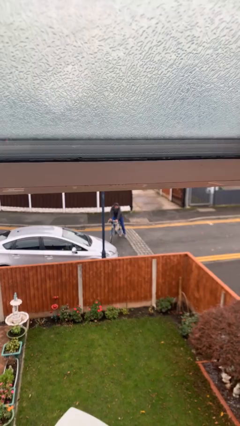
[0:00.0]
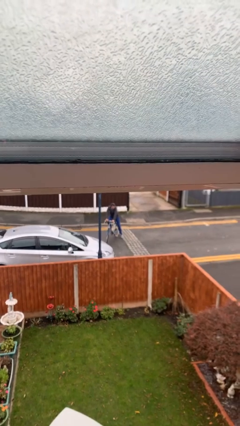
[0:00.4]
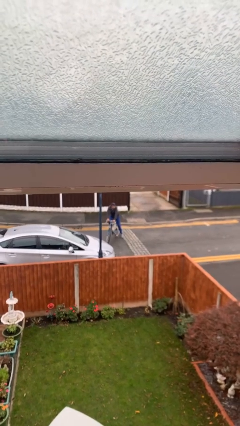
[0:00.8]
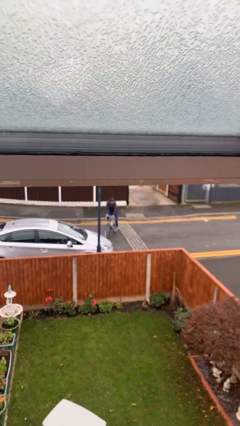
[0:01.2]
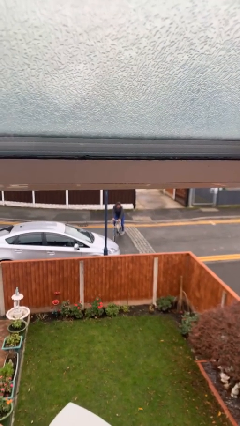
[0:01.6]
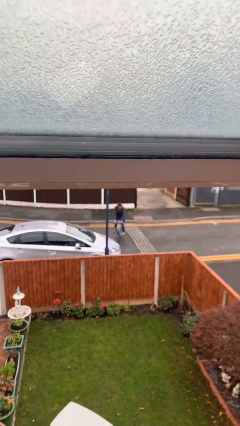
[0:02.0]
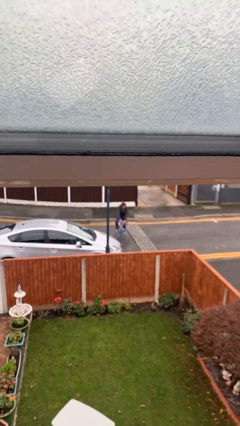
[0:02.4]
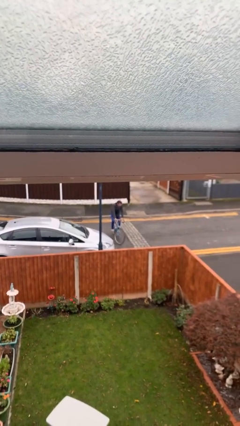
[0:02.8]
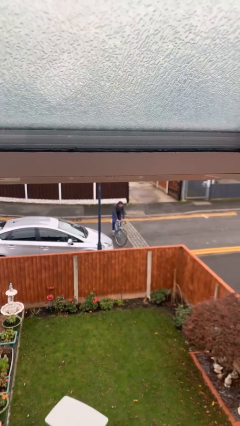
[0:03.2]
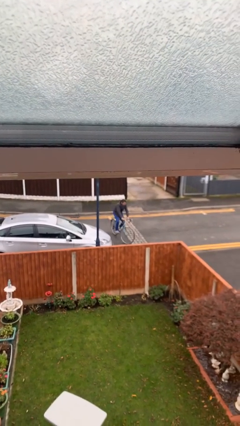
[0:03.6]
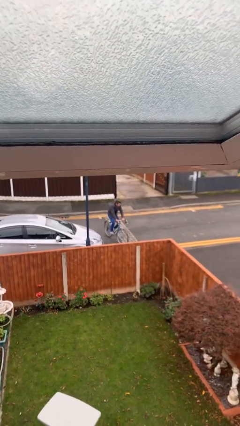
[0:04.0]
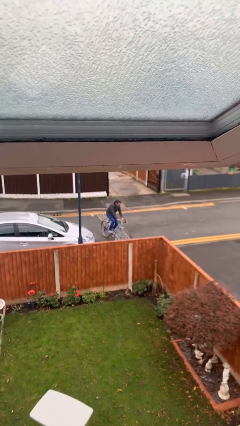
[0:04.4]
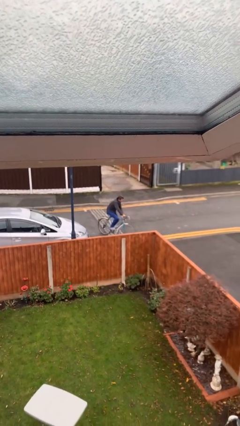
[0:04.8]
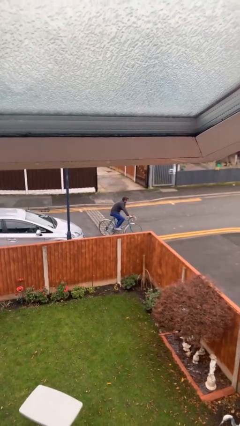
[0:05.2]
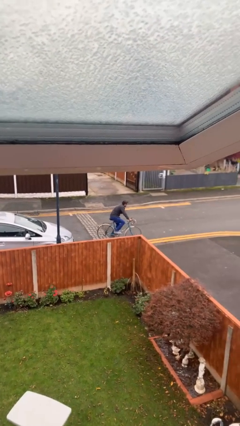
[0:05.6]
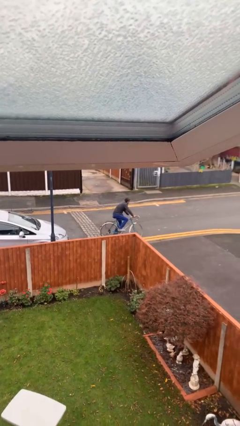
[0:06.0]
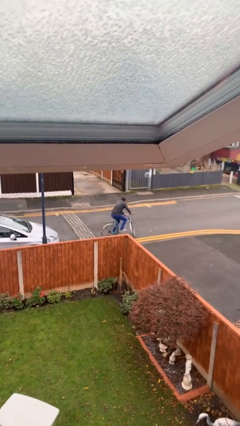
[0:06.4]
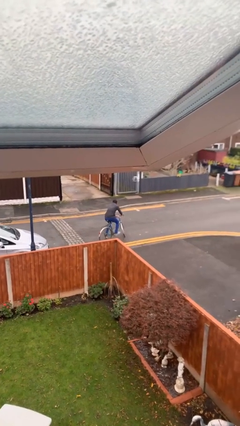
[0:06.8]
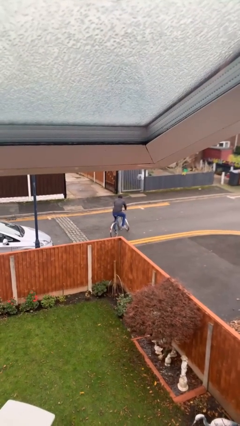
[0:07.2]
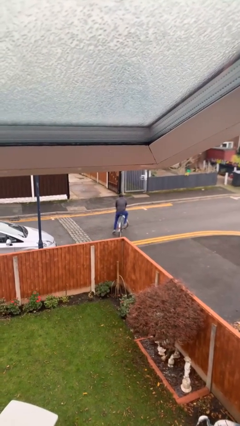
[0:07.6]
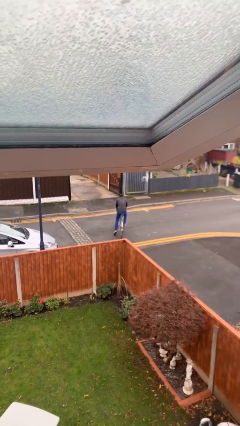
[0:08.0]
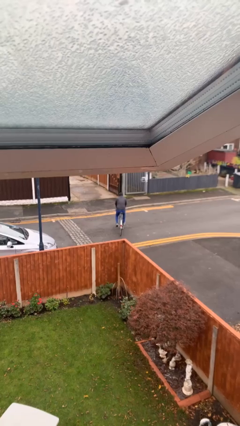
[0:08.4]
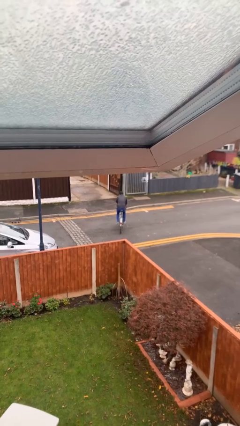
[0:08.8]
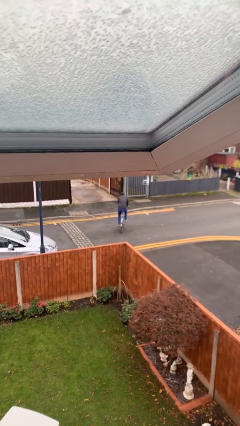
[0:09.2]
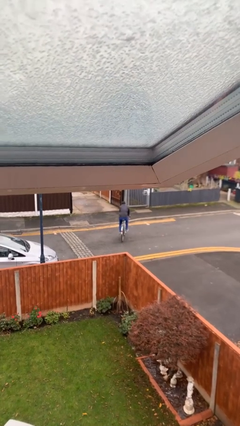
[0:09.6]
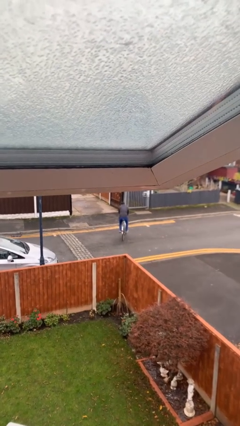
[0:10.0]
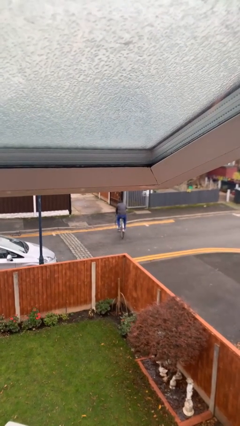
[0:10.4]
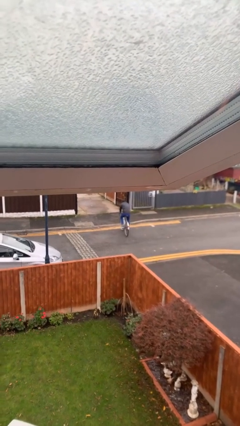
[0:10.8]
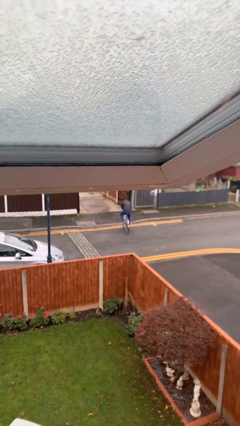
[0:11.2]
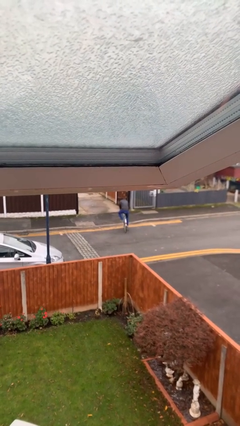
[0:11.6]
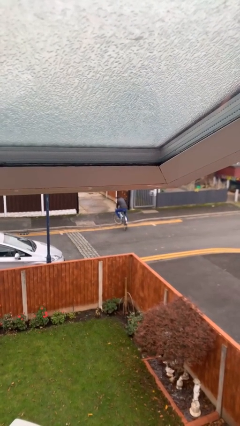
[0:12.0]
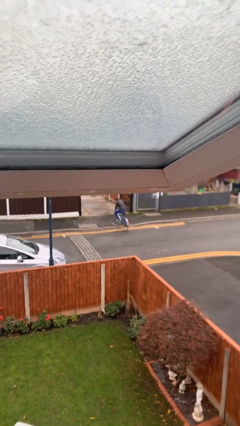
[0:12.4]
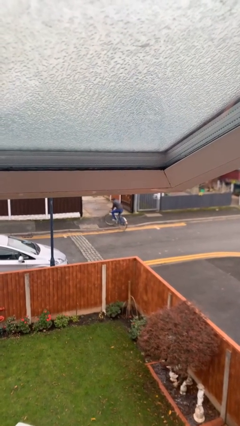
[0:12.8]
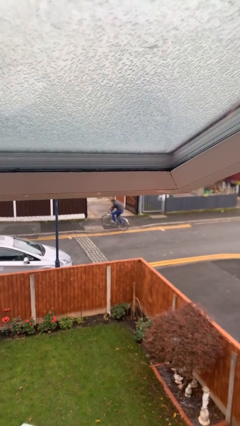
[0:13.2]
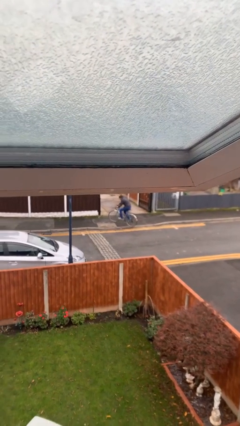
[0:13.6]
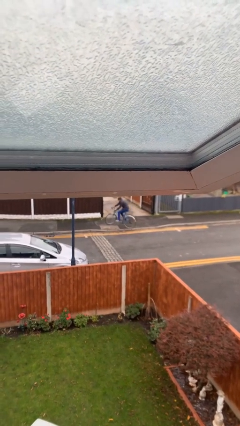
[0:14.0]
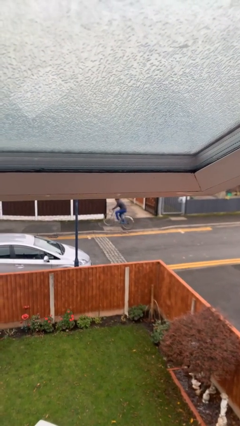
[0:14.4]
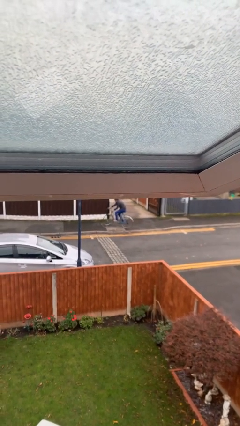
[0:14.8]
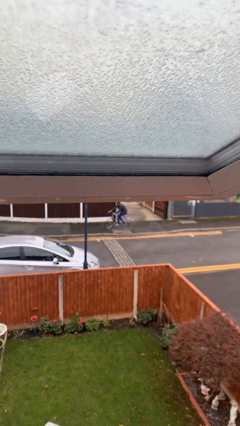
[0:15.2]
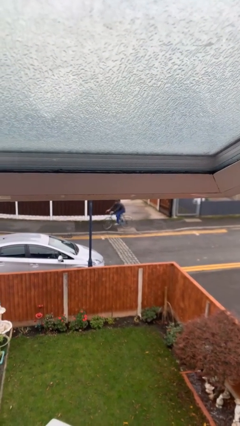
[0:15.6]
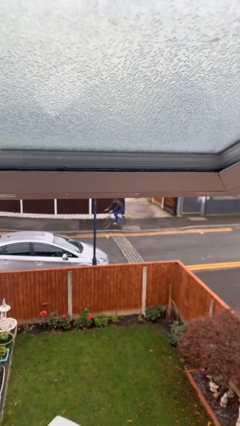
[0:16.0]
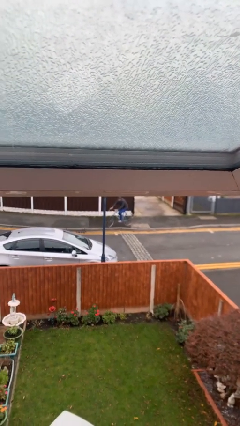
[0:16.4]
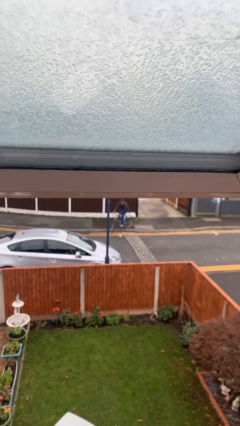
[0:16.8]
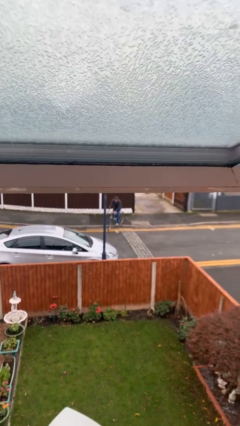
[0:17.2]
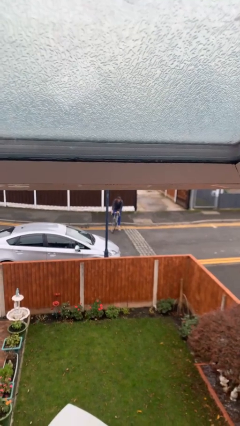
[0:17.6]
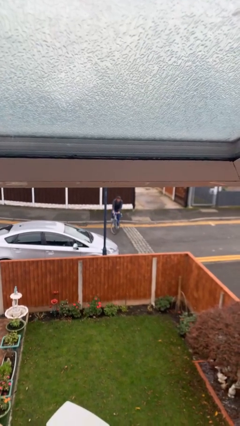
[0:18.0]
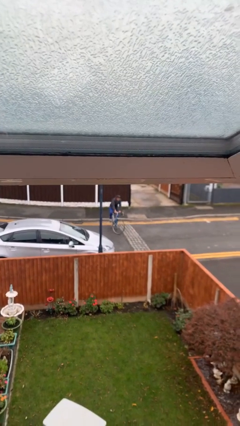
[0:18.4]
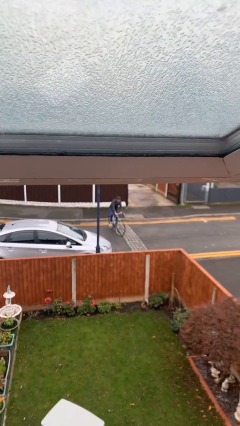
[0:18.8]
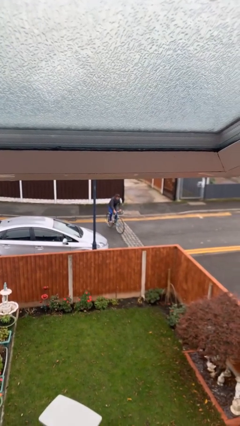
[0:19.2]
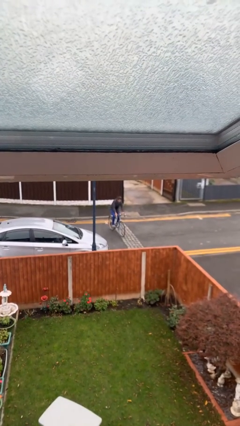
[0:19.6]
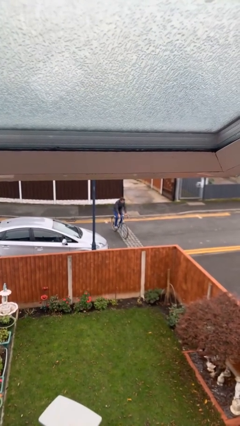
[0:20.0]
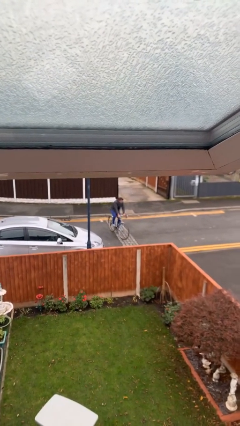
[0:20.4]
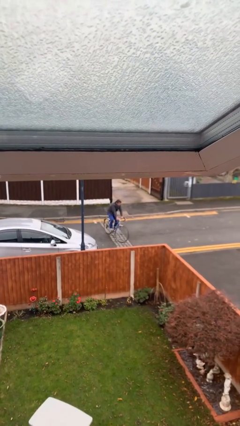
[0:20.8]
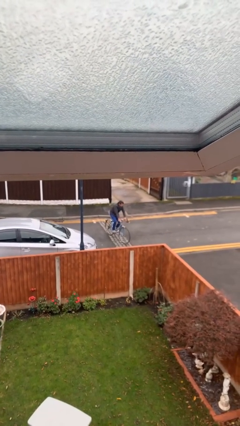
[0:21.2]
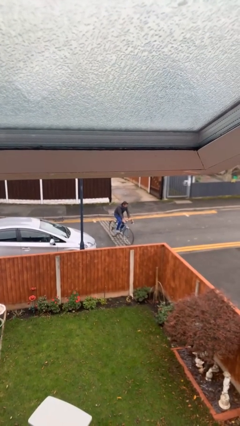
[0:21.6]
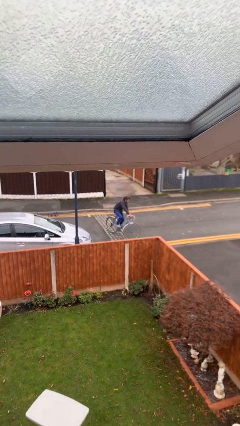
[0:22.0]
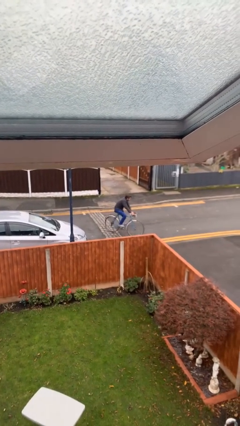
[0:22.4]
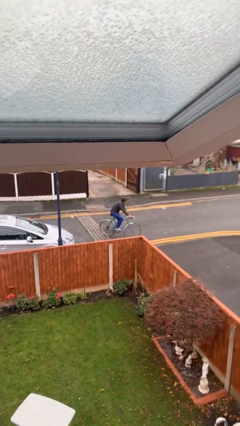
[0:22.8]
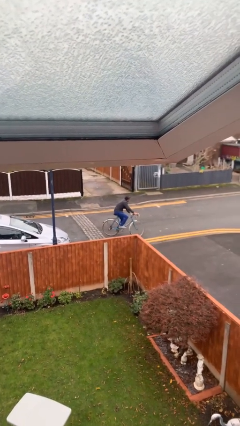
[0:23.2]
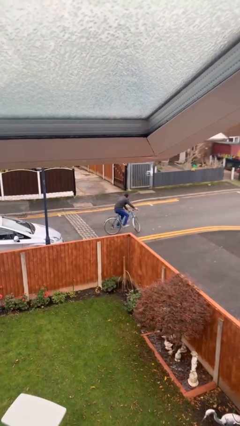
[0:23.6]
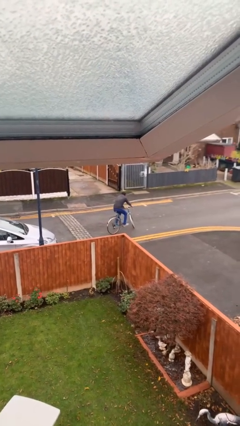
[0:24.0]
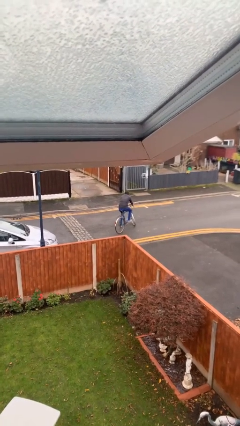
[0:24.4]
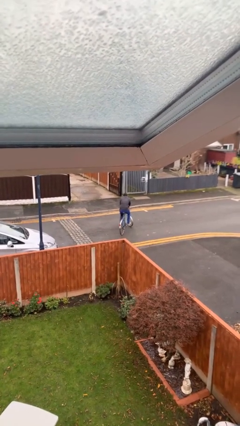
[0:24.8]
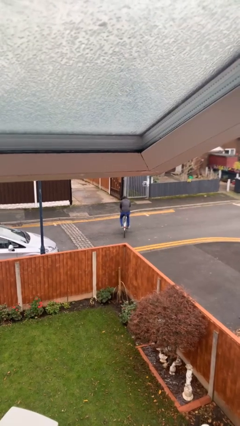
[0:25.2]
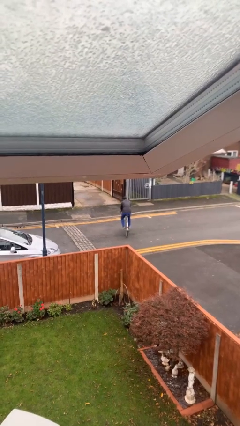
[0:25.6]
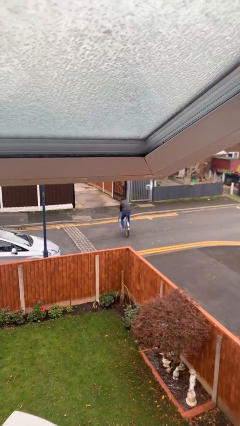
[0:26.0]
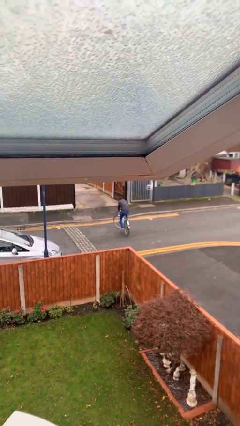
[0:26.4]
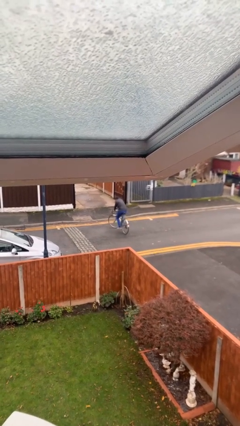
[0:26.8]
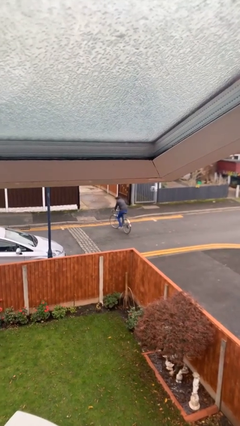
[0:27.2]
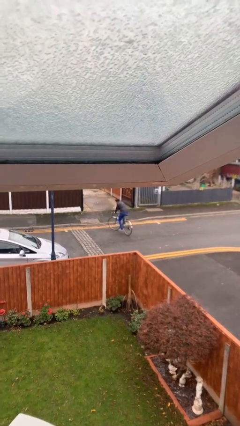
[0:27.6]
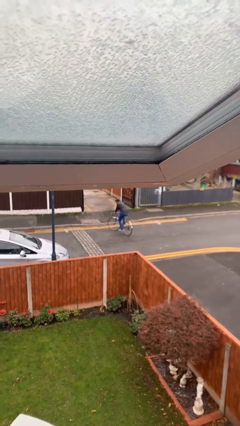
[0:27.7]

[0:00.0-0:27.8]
person rides bicycle

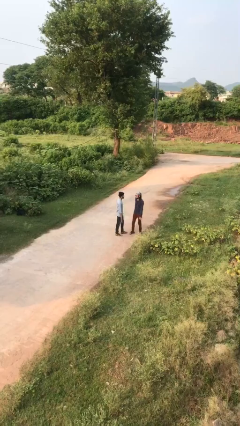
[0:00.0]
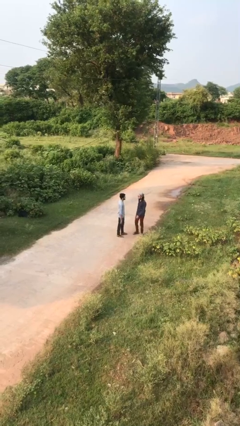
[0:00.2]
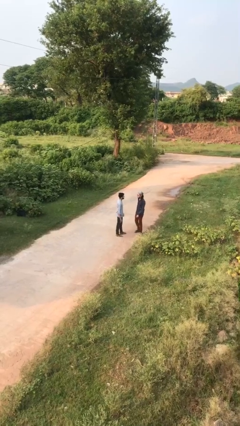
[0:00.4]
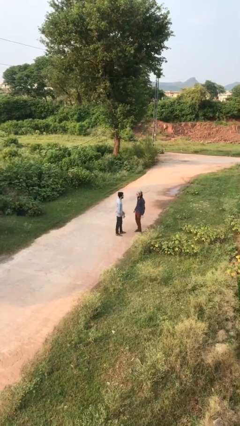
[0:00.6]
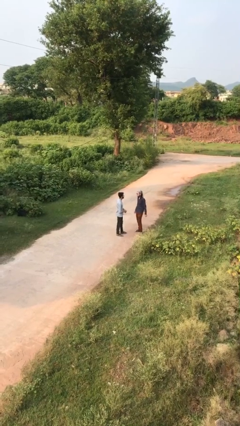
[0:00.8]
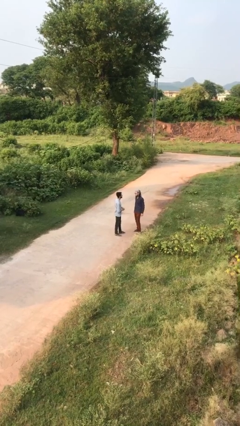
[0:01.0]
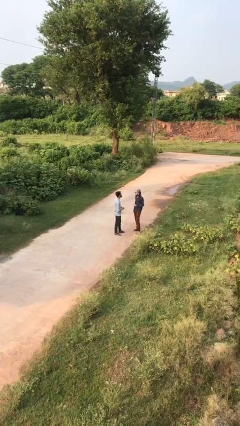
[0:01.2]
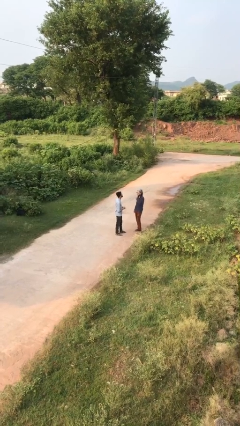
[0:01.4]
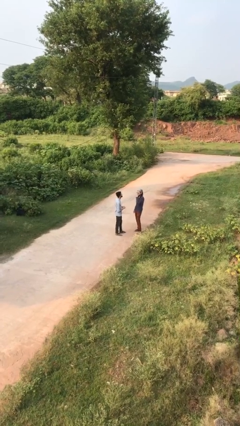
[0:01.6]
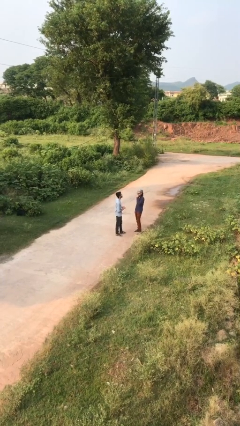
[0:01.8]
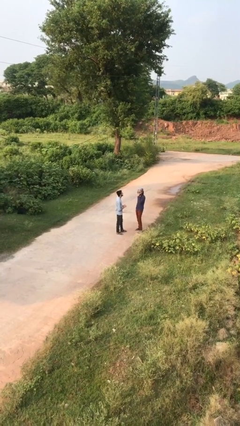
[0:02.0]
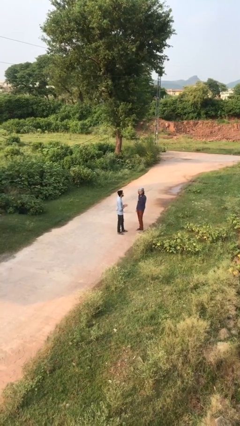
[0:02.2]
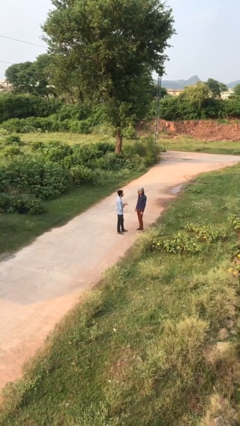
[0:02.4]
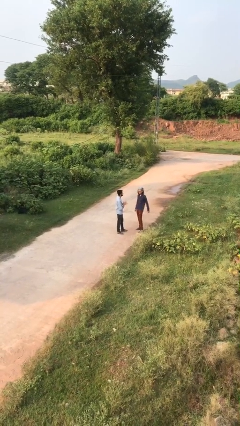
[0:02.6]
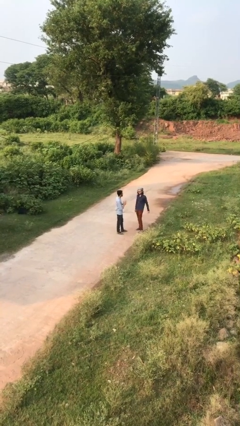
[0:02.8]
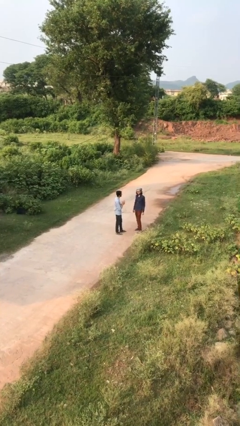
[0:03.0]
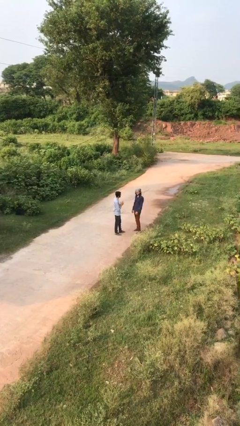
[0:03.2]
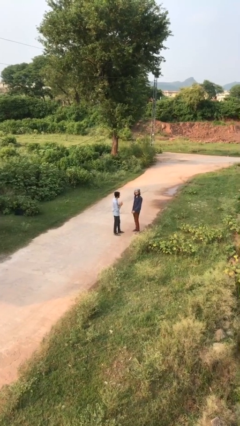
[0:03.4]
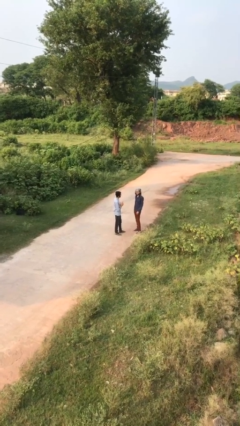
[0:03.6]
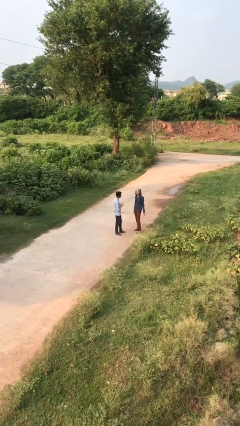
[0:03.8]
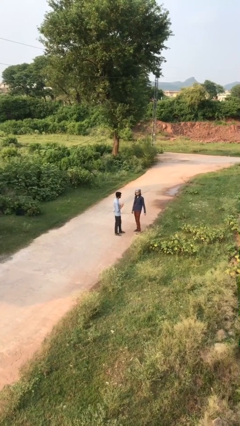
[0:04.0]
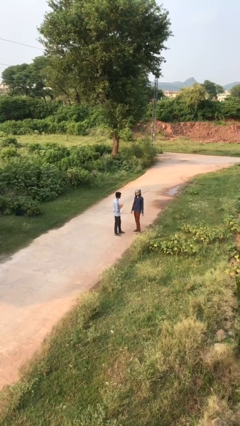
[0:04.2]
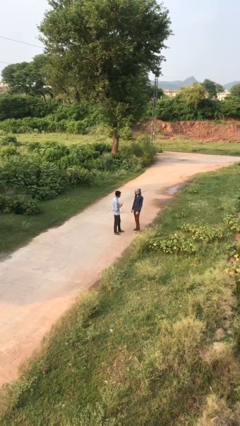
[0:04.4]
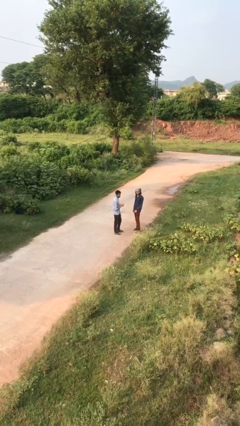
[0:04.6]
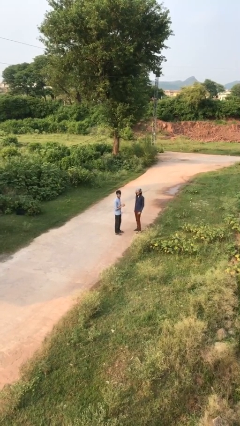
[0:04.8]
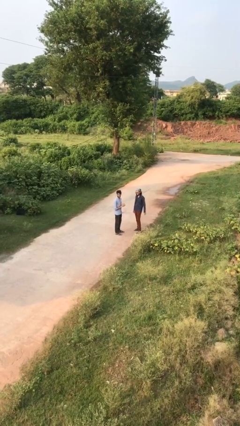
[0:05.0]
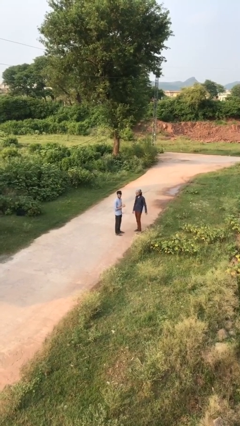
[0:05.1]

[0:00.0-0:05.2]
person talks to person
